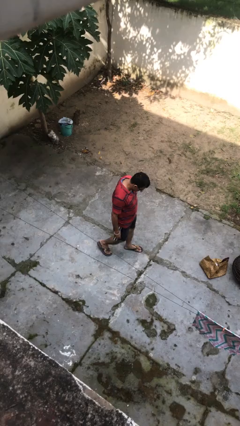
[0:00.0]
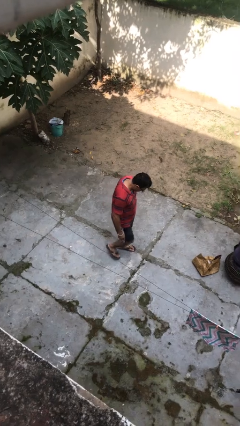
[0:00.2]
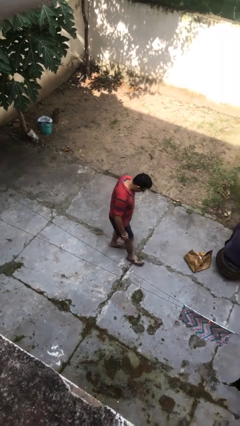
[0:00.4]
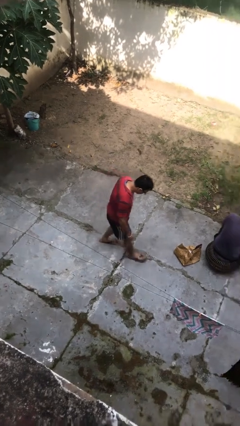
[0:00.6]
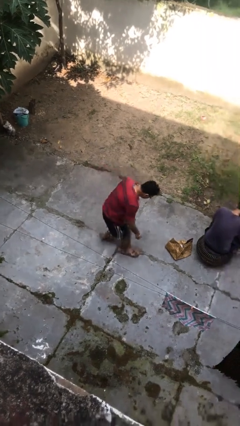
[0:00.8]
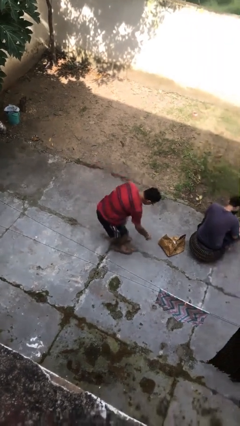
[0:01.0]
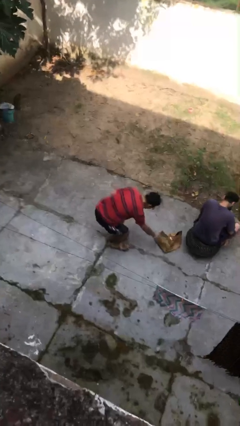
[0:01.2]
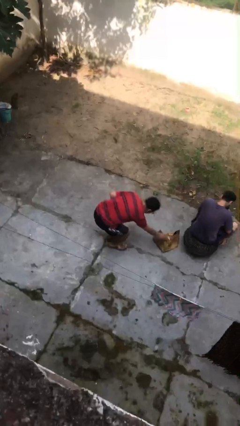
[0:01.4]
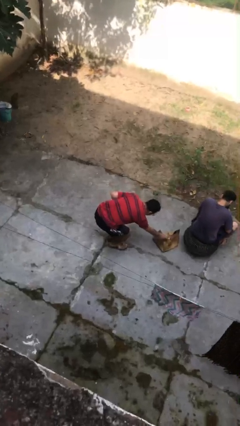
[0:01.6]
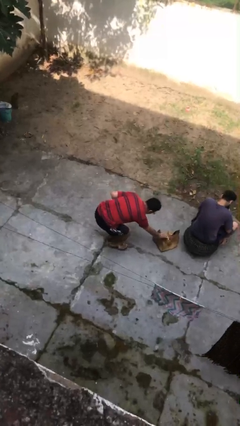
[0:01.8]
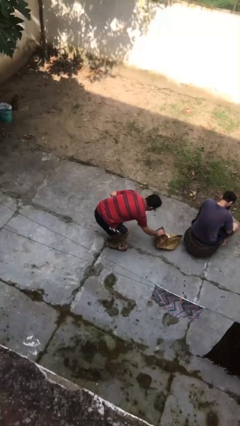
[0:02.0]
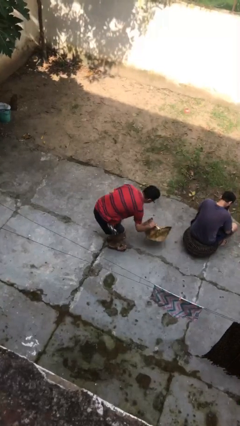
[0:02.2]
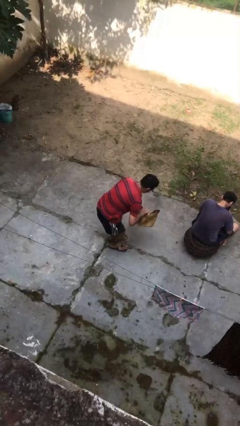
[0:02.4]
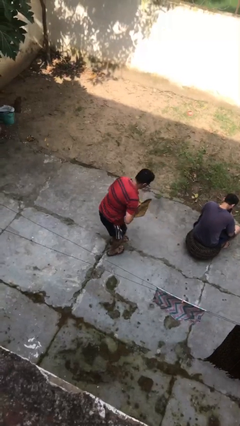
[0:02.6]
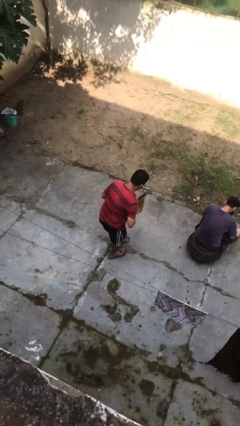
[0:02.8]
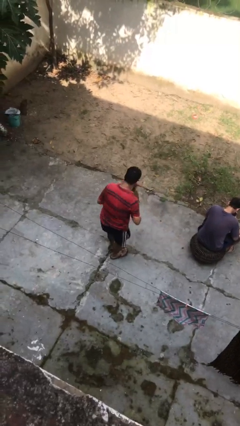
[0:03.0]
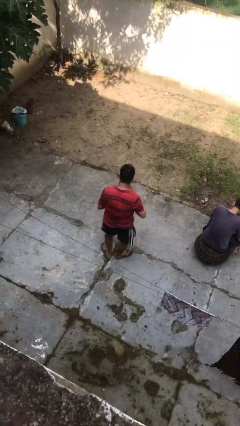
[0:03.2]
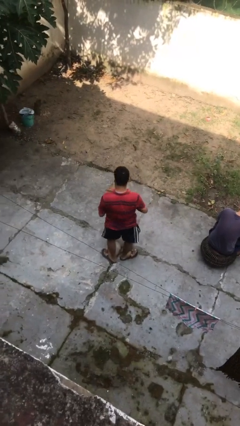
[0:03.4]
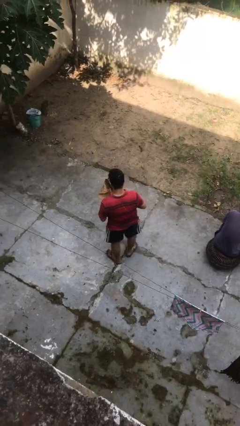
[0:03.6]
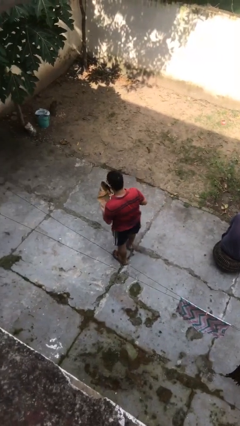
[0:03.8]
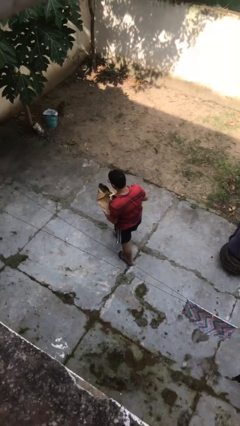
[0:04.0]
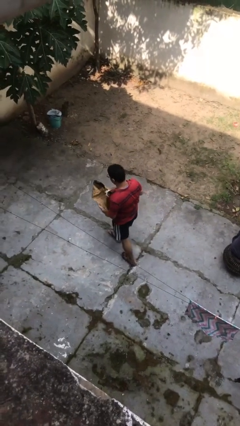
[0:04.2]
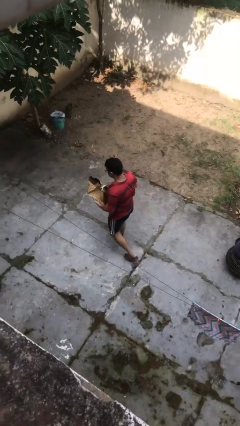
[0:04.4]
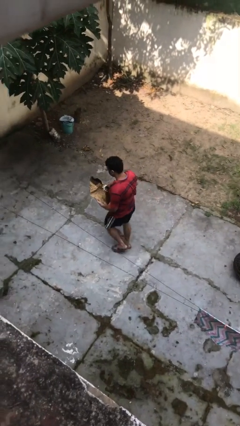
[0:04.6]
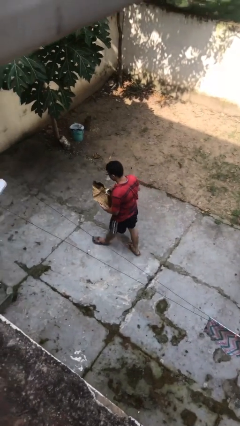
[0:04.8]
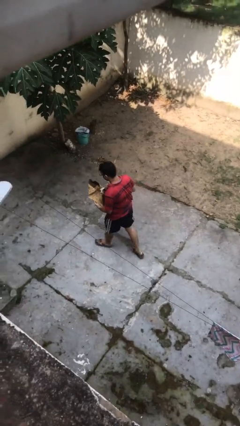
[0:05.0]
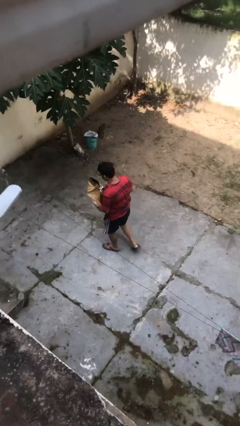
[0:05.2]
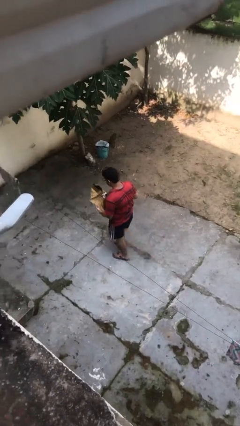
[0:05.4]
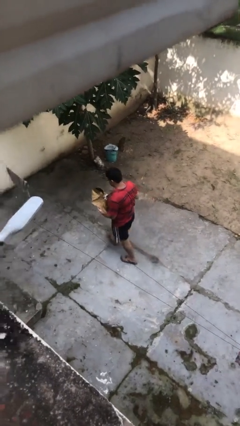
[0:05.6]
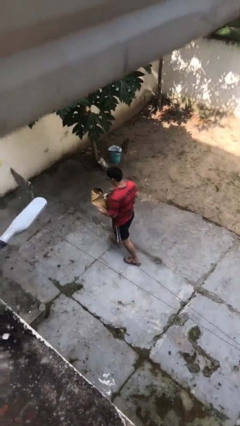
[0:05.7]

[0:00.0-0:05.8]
person steals object from person

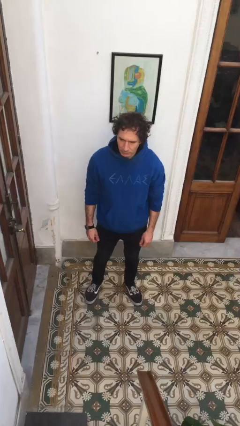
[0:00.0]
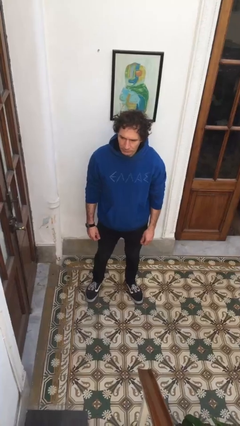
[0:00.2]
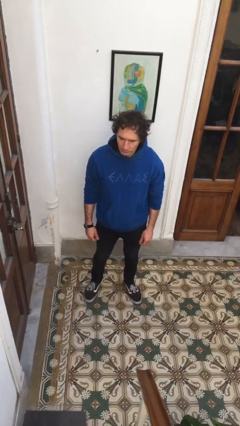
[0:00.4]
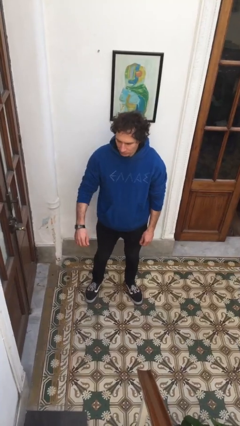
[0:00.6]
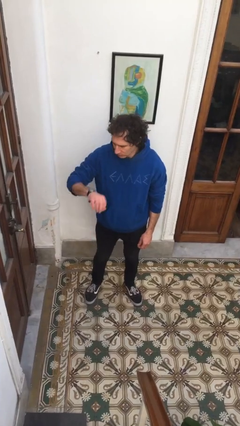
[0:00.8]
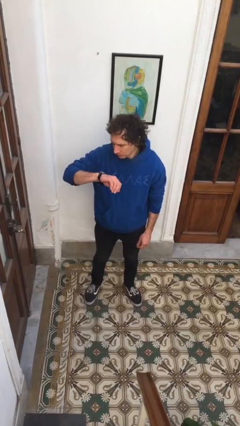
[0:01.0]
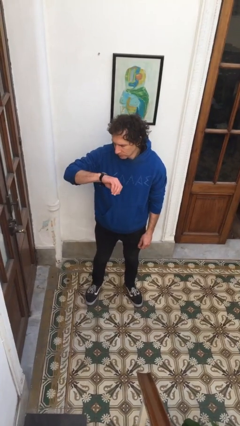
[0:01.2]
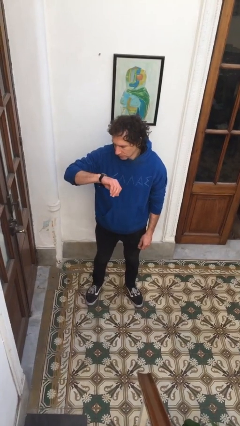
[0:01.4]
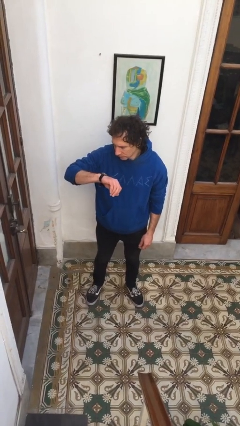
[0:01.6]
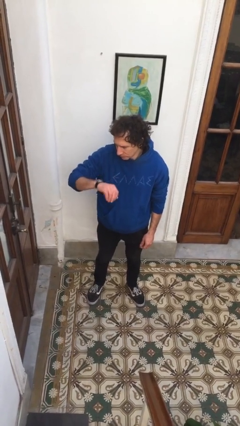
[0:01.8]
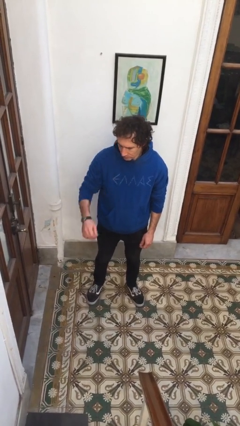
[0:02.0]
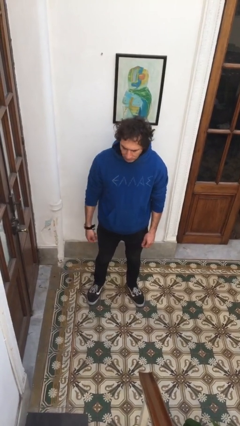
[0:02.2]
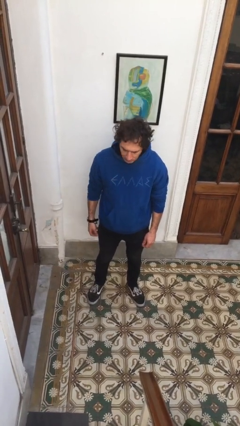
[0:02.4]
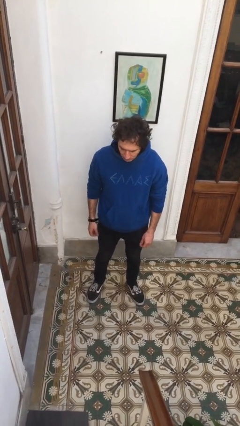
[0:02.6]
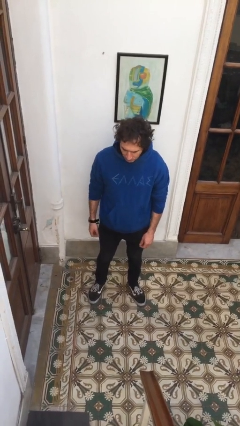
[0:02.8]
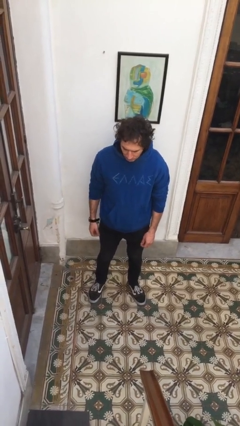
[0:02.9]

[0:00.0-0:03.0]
person looks at wristwatch

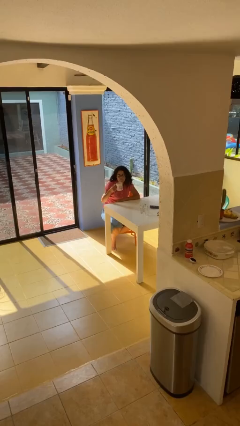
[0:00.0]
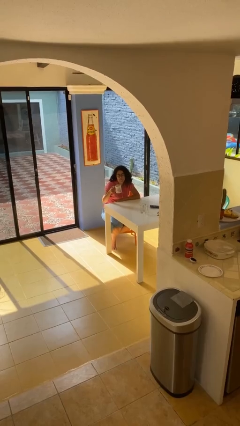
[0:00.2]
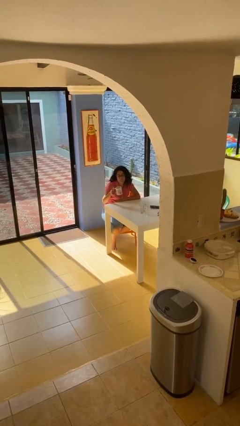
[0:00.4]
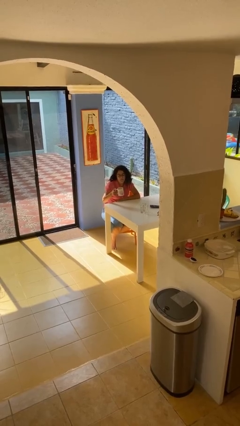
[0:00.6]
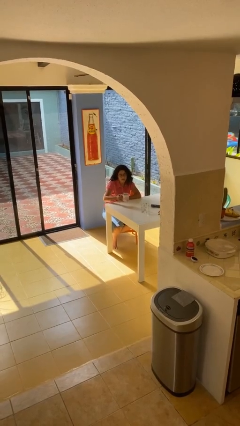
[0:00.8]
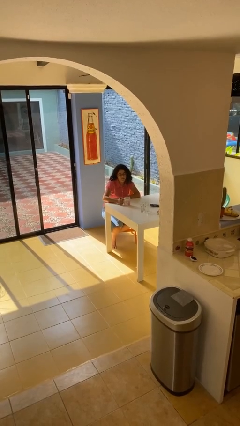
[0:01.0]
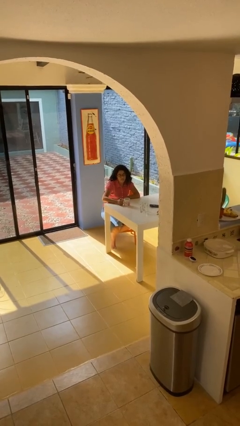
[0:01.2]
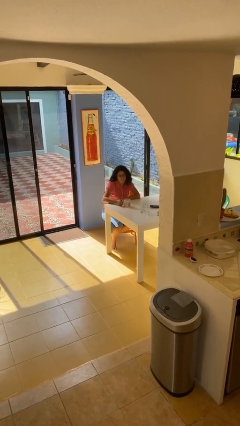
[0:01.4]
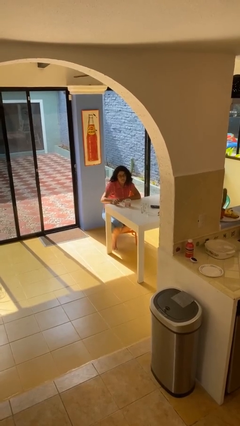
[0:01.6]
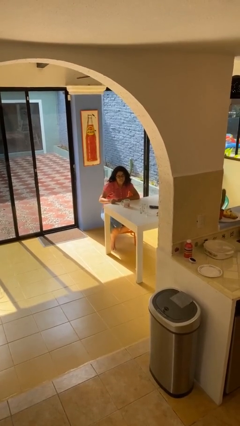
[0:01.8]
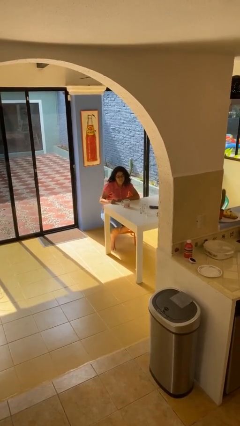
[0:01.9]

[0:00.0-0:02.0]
person puts down object on table

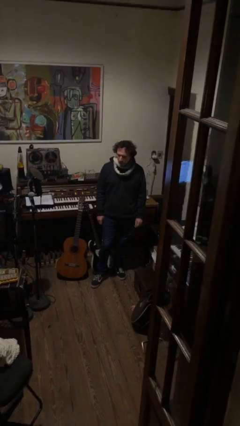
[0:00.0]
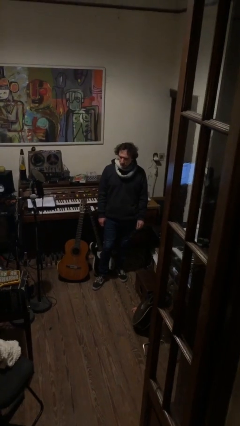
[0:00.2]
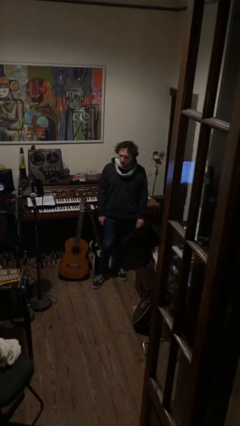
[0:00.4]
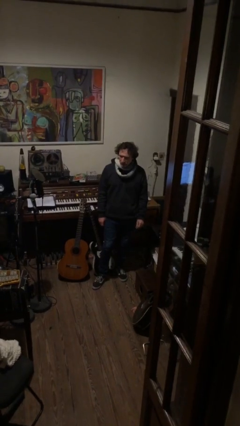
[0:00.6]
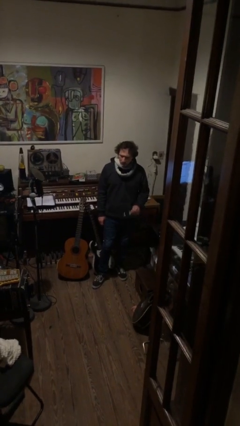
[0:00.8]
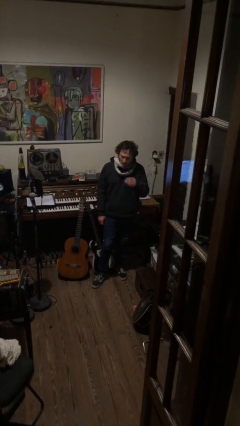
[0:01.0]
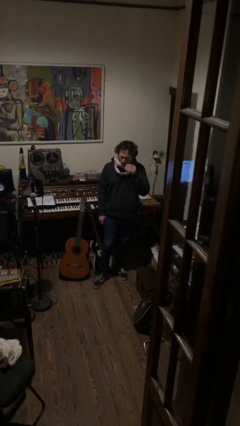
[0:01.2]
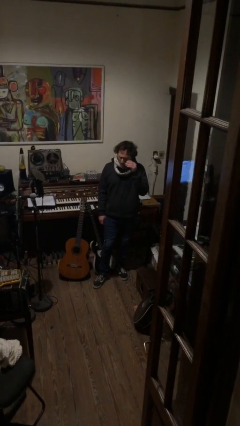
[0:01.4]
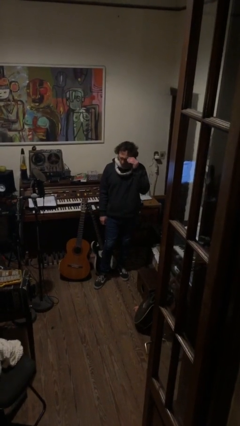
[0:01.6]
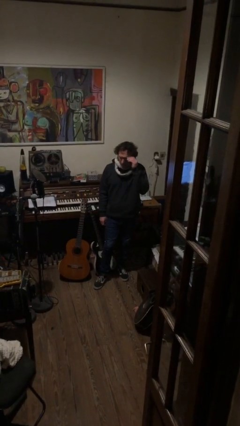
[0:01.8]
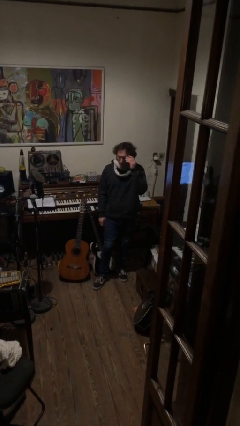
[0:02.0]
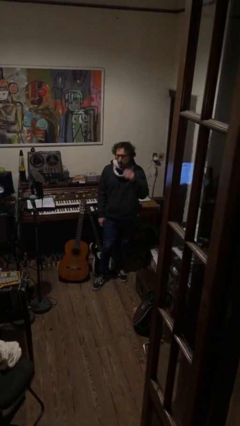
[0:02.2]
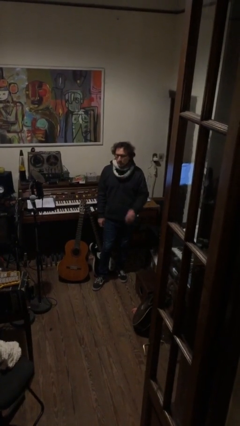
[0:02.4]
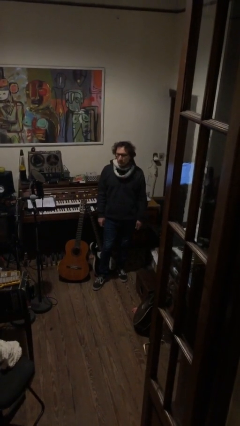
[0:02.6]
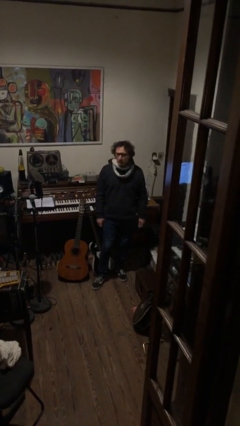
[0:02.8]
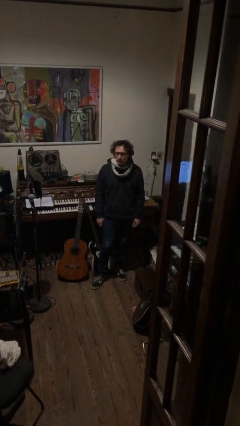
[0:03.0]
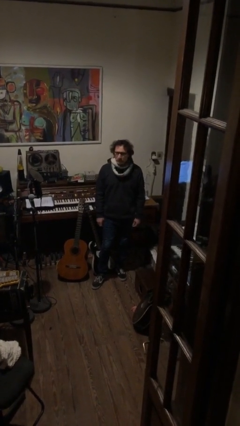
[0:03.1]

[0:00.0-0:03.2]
person puts on glasses

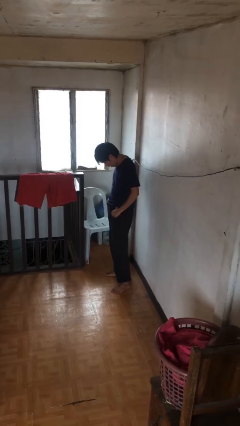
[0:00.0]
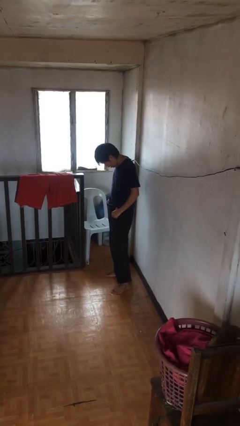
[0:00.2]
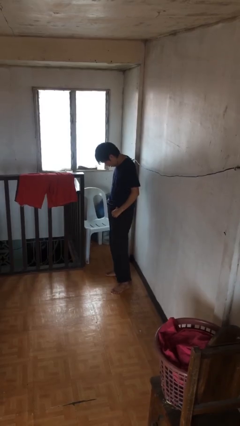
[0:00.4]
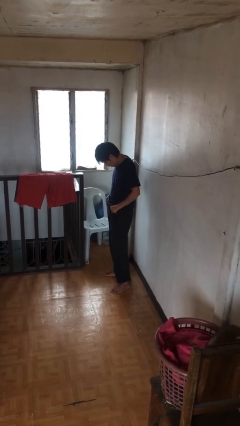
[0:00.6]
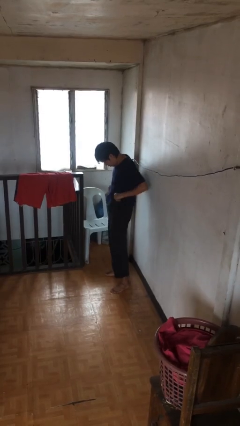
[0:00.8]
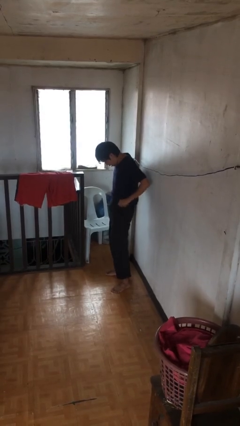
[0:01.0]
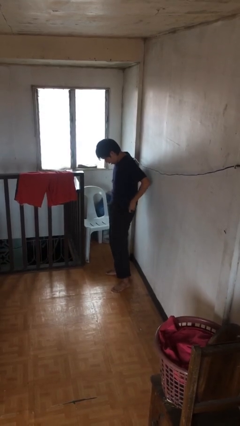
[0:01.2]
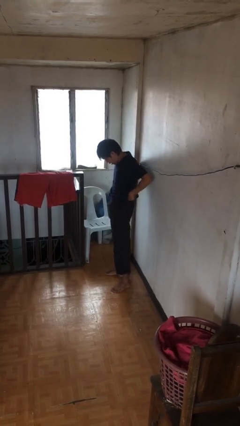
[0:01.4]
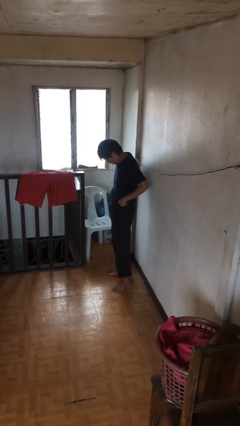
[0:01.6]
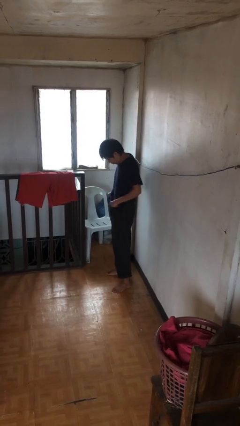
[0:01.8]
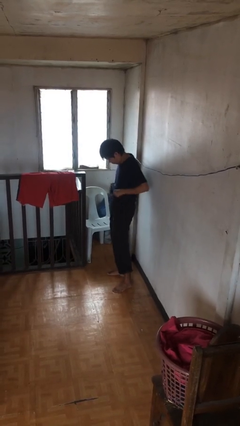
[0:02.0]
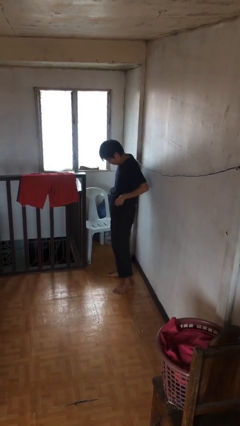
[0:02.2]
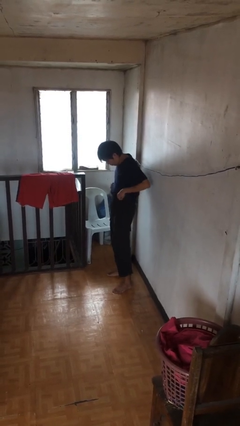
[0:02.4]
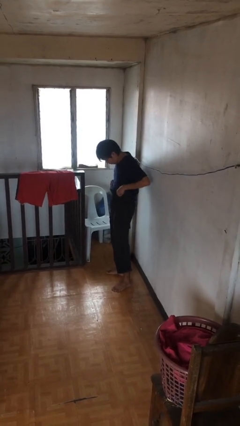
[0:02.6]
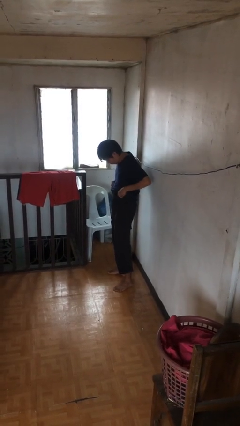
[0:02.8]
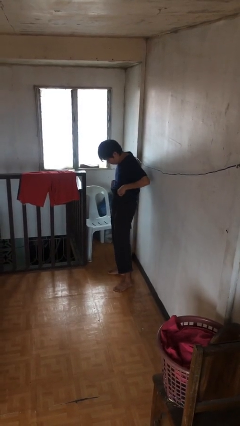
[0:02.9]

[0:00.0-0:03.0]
person hikes up pants

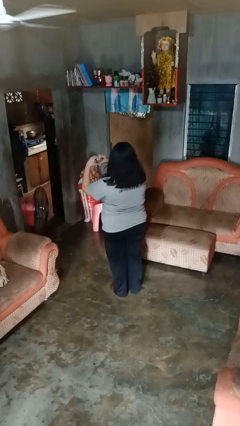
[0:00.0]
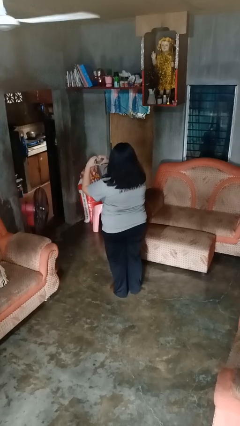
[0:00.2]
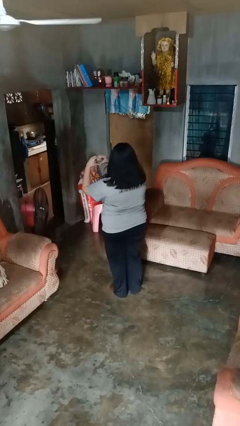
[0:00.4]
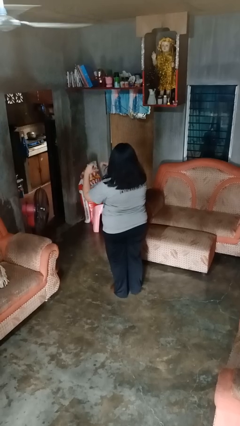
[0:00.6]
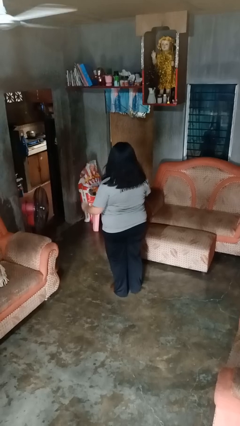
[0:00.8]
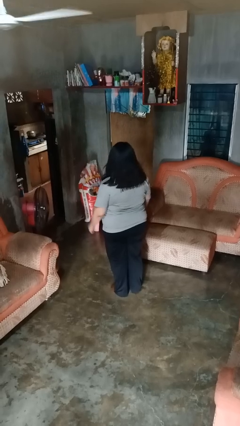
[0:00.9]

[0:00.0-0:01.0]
person gestures heart
